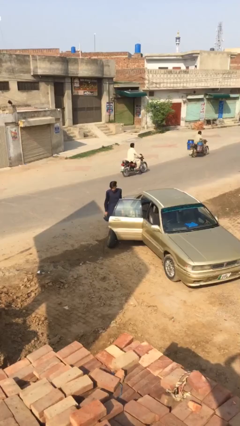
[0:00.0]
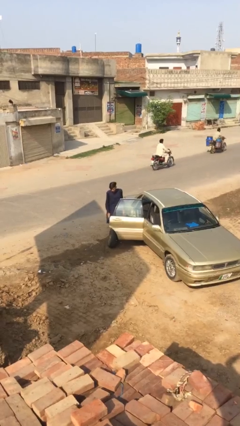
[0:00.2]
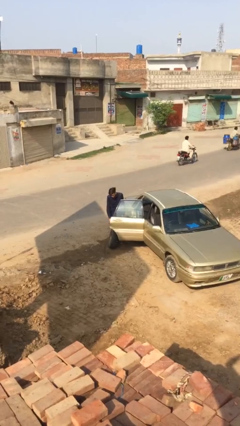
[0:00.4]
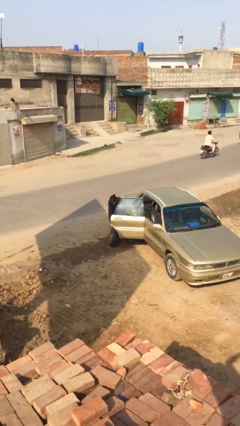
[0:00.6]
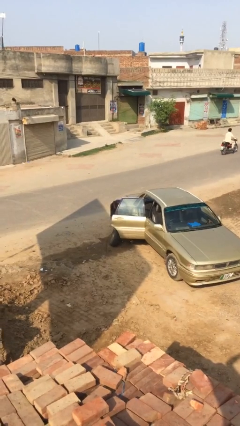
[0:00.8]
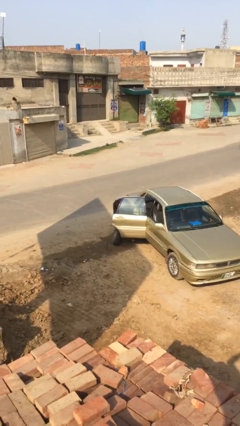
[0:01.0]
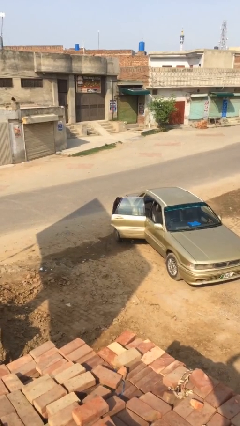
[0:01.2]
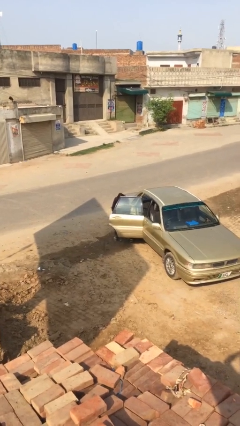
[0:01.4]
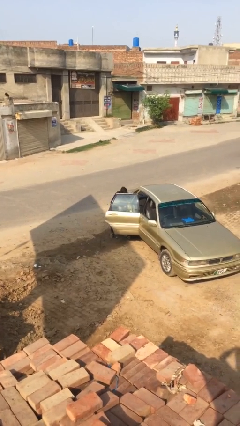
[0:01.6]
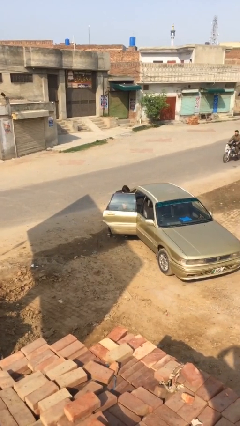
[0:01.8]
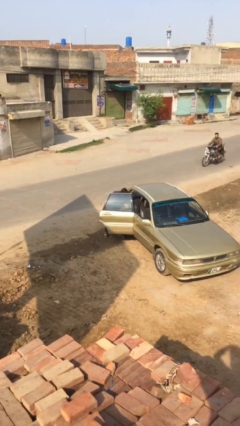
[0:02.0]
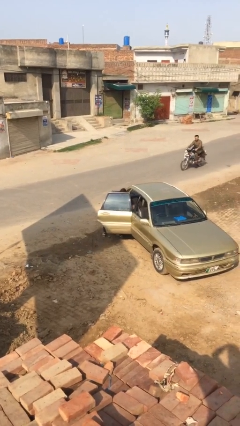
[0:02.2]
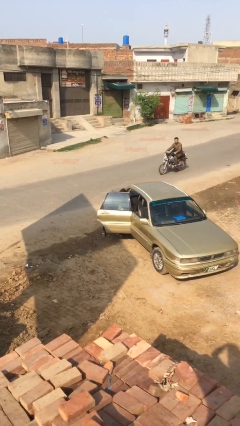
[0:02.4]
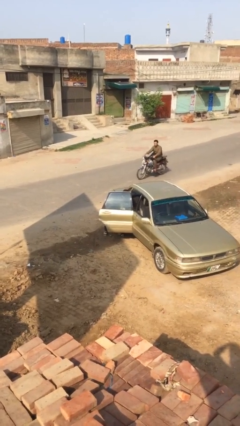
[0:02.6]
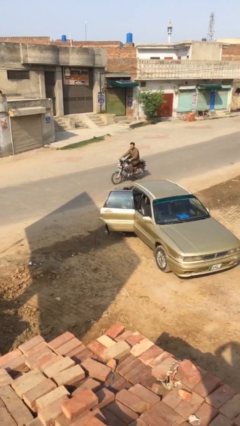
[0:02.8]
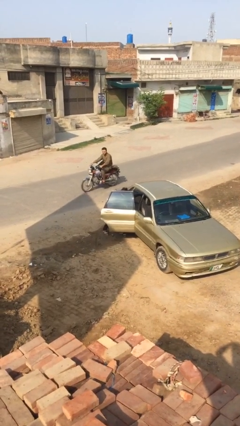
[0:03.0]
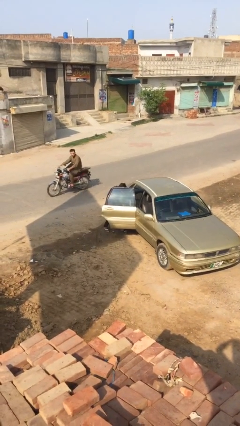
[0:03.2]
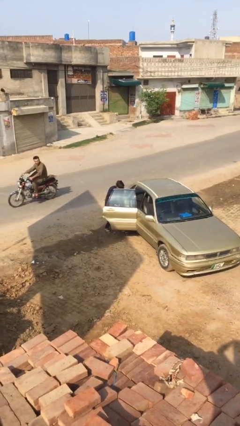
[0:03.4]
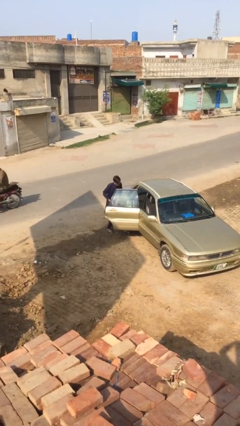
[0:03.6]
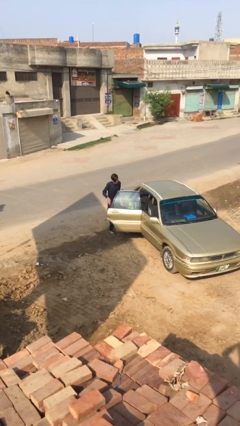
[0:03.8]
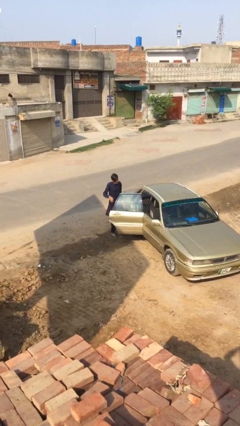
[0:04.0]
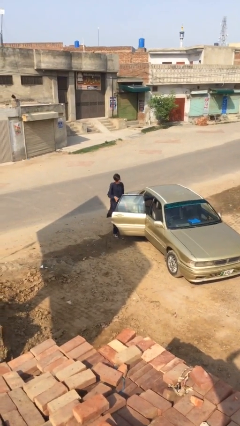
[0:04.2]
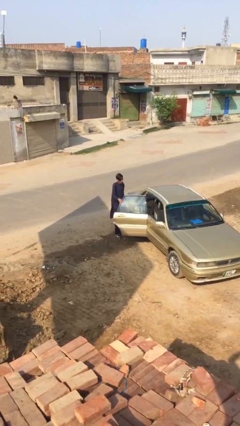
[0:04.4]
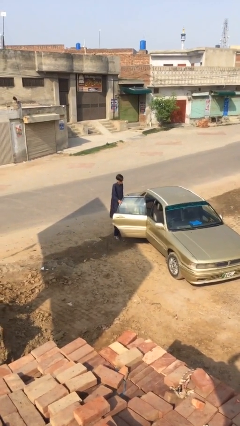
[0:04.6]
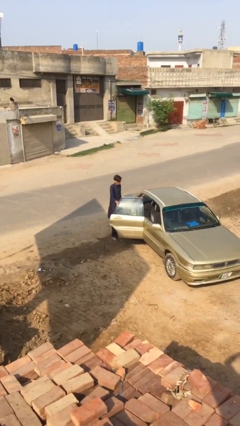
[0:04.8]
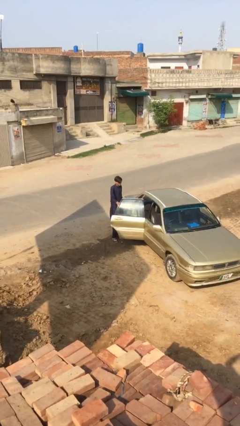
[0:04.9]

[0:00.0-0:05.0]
person loads car

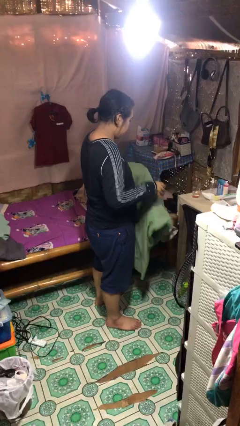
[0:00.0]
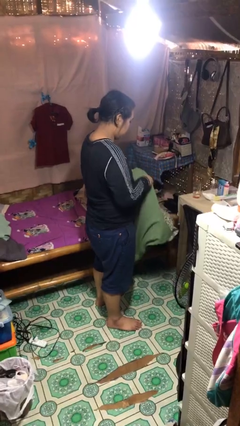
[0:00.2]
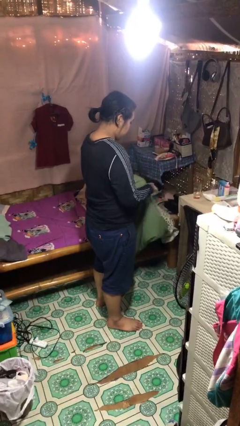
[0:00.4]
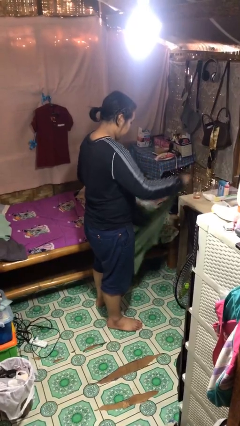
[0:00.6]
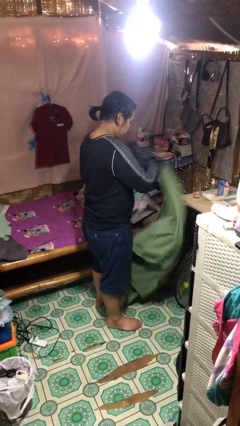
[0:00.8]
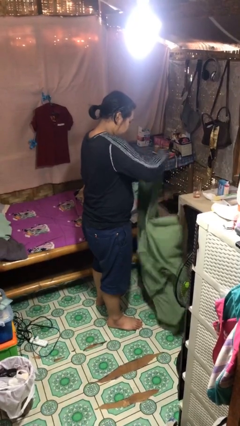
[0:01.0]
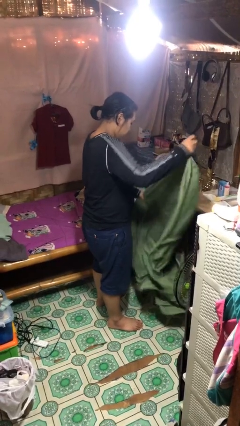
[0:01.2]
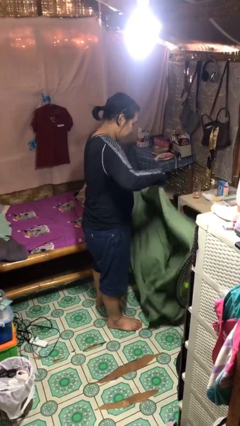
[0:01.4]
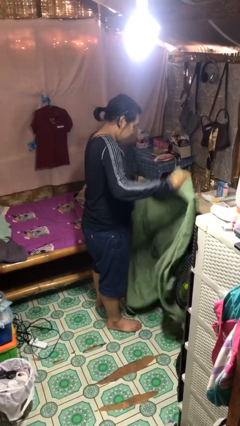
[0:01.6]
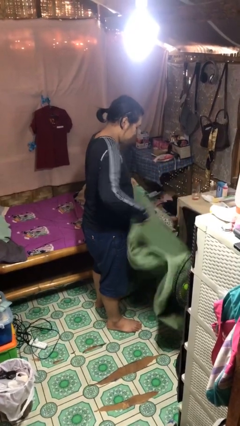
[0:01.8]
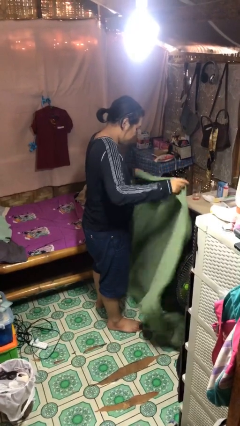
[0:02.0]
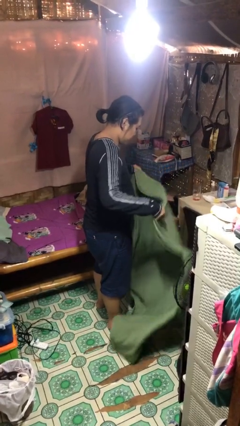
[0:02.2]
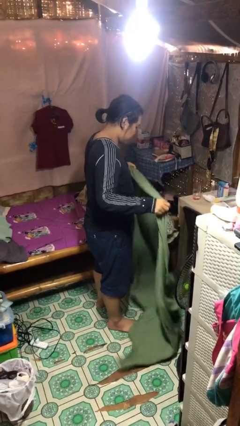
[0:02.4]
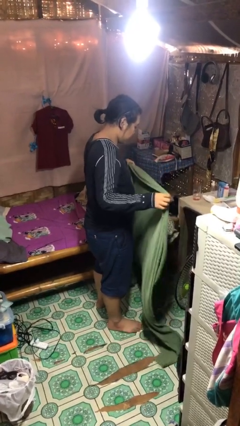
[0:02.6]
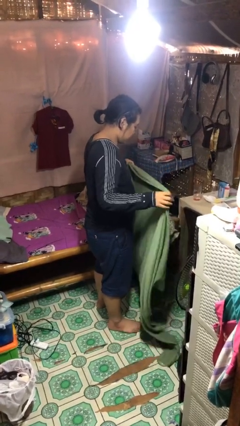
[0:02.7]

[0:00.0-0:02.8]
person unfolds blanket

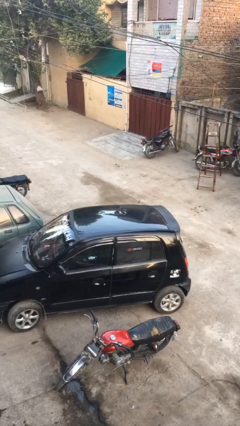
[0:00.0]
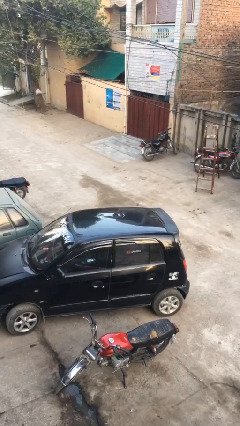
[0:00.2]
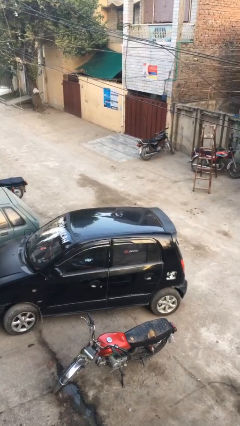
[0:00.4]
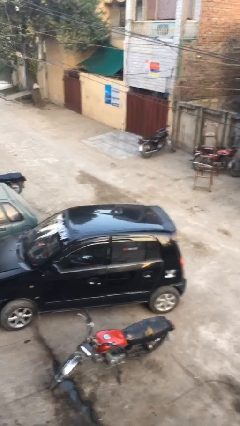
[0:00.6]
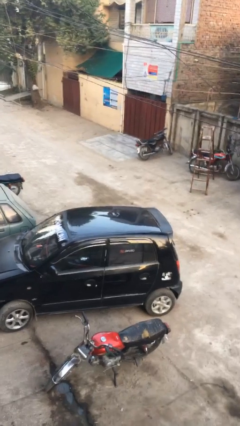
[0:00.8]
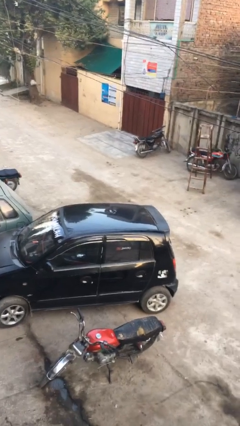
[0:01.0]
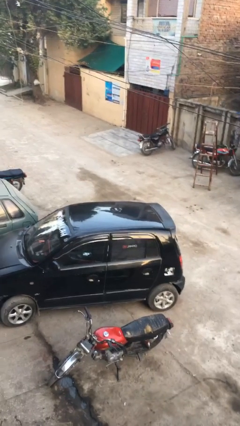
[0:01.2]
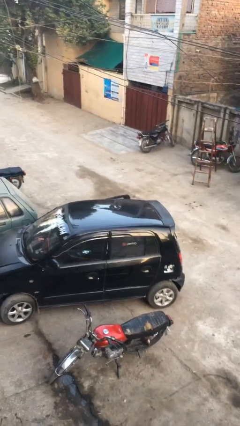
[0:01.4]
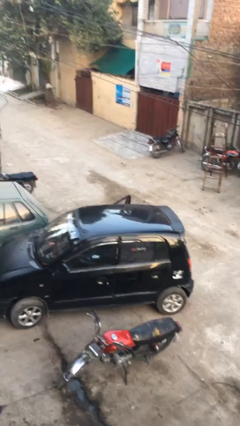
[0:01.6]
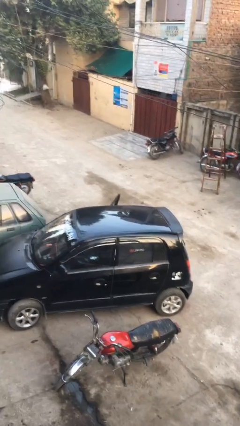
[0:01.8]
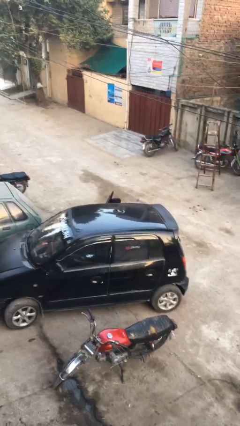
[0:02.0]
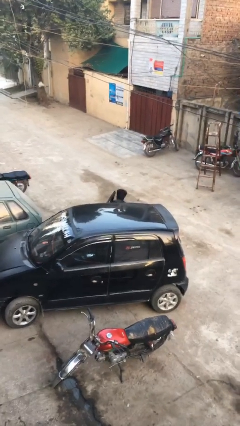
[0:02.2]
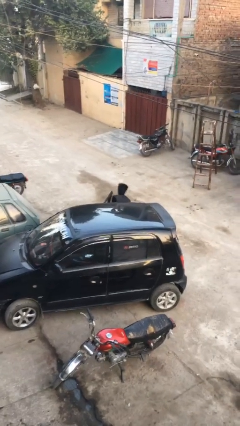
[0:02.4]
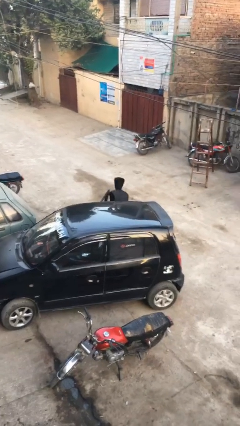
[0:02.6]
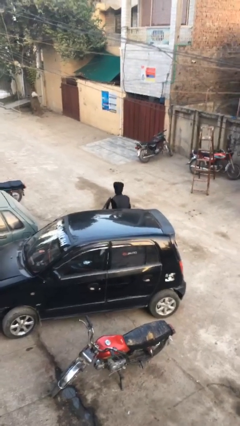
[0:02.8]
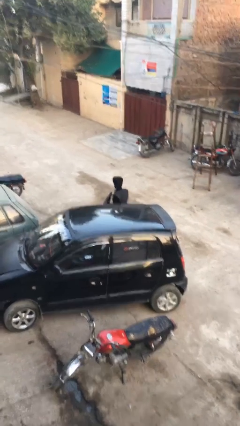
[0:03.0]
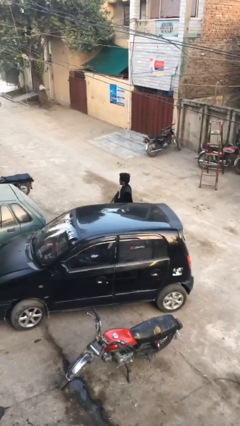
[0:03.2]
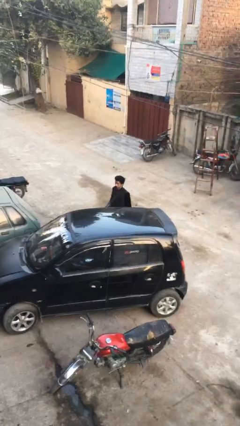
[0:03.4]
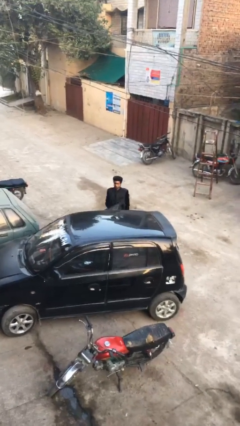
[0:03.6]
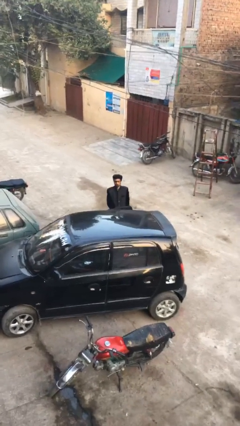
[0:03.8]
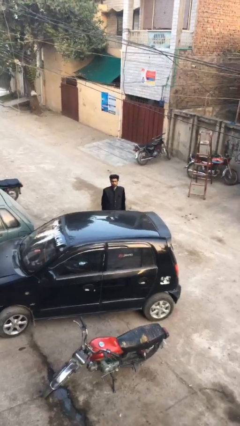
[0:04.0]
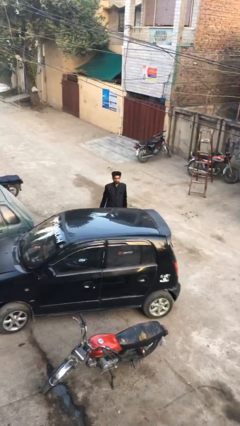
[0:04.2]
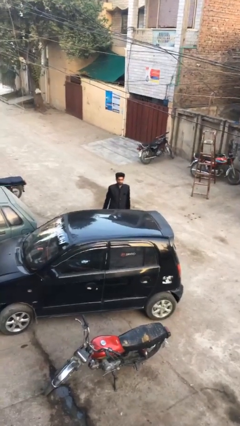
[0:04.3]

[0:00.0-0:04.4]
person exits car

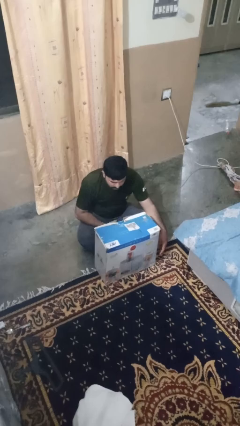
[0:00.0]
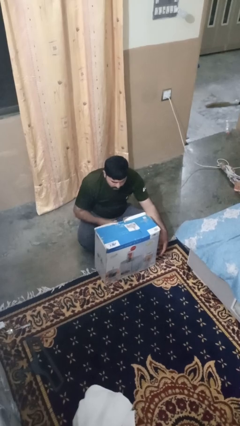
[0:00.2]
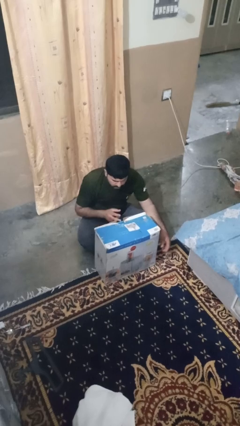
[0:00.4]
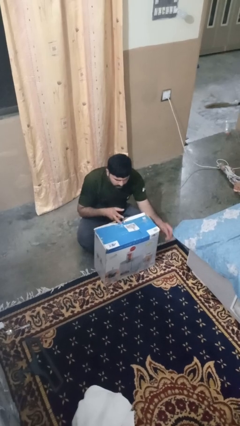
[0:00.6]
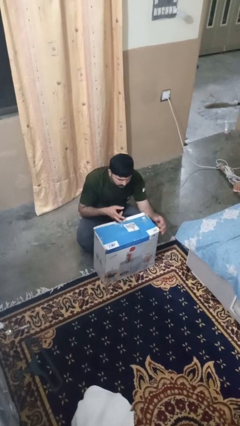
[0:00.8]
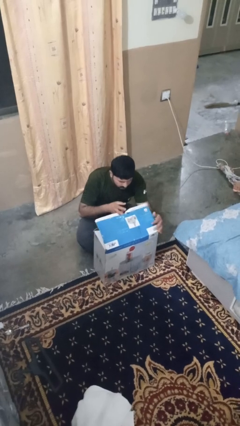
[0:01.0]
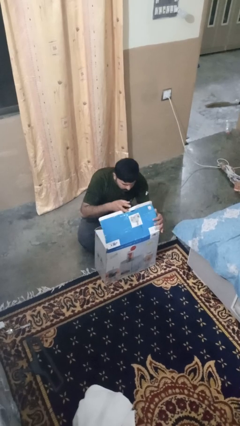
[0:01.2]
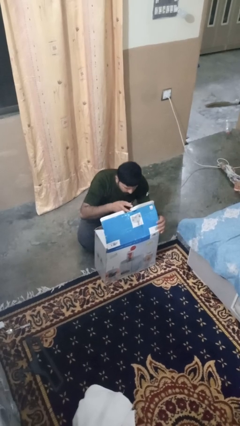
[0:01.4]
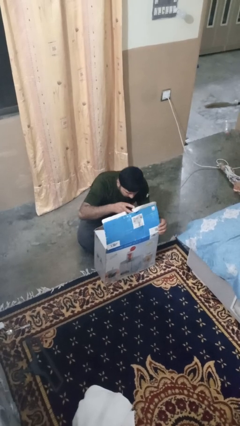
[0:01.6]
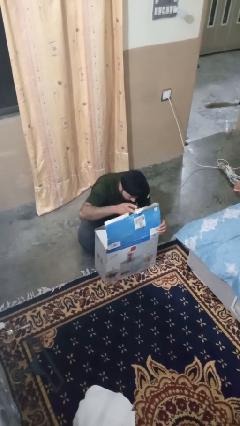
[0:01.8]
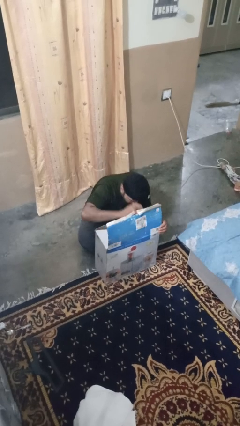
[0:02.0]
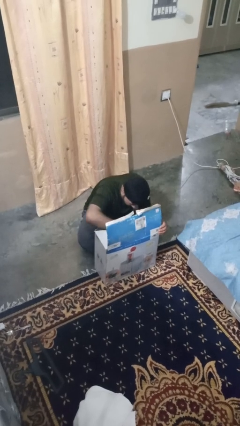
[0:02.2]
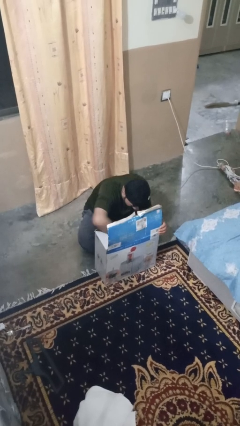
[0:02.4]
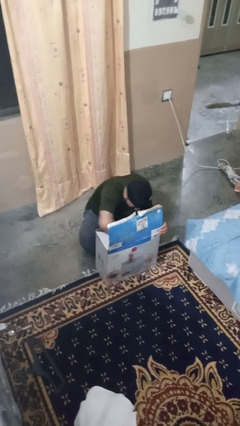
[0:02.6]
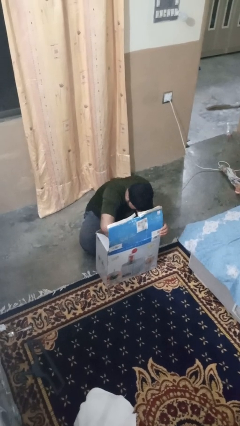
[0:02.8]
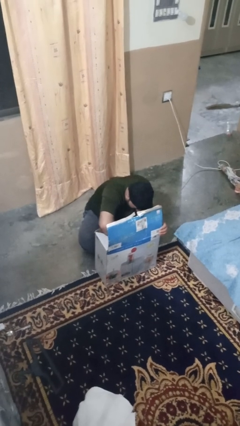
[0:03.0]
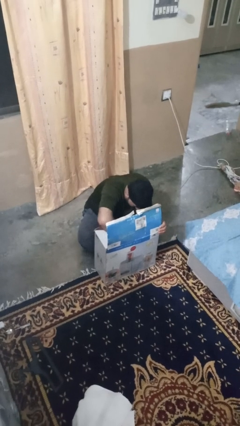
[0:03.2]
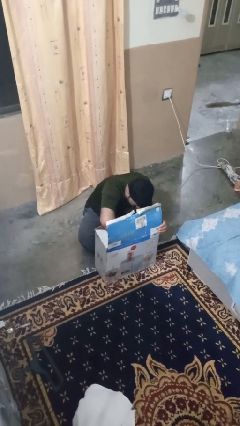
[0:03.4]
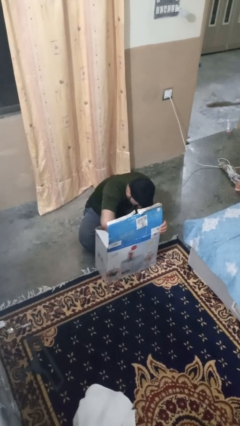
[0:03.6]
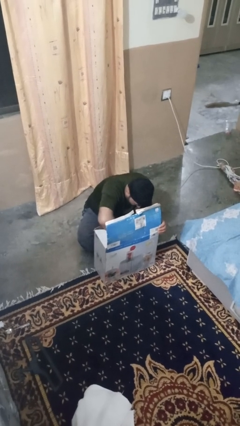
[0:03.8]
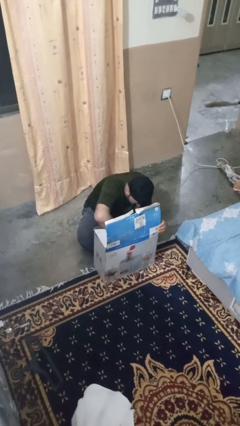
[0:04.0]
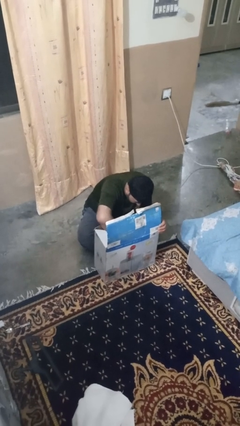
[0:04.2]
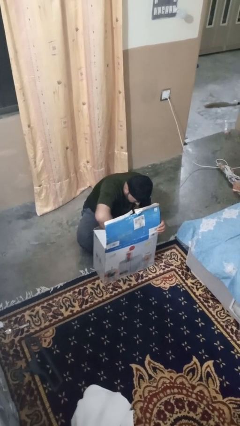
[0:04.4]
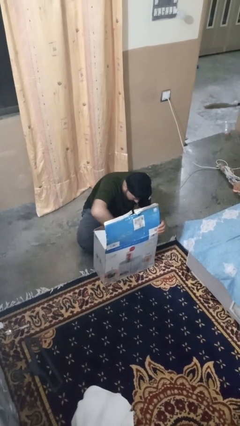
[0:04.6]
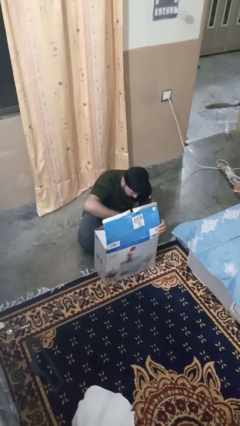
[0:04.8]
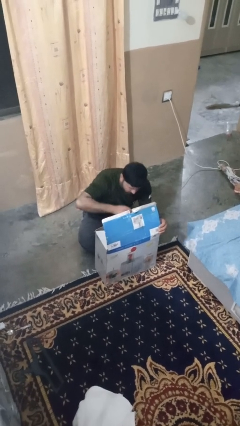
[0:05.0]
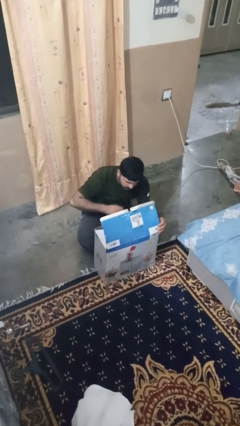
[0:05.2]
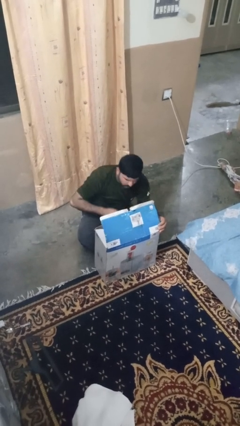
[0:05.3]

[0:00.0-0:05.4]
person searches in box

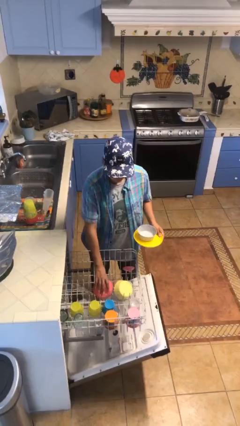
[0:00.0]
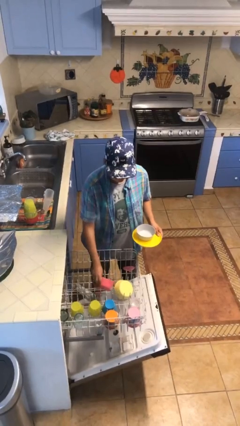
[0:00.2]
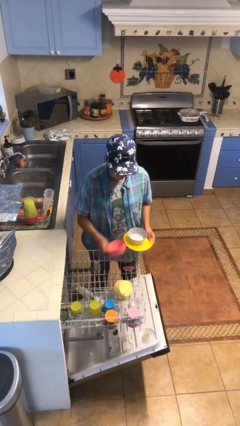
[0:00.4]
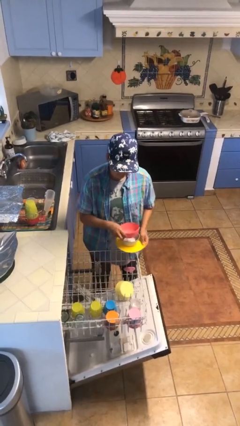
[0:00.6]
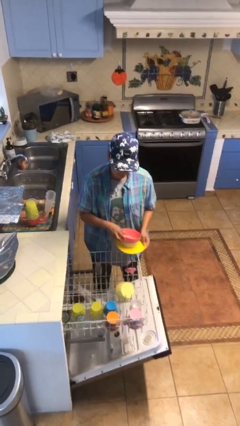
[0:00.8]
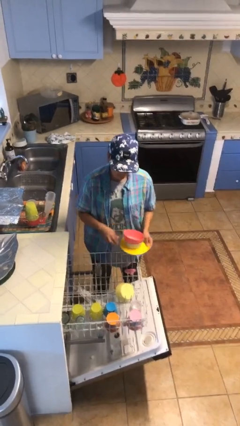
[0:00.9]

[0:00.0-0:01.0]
person unloads dishwasher
